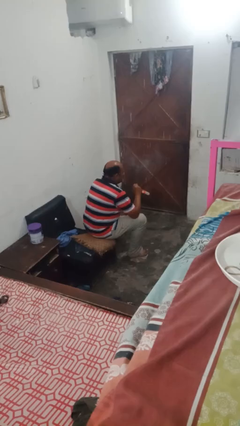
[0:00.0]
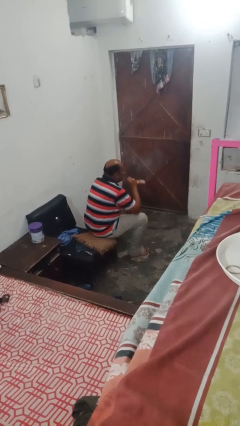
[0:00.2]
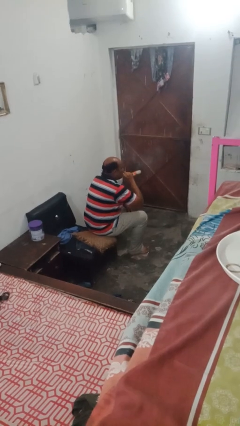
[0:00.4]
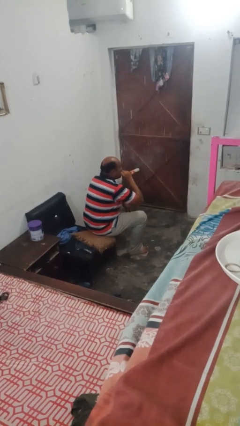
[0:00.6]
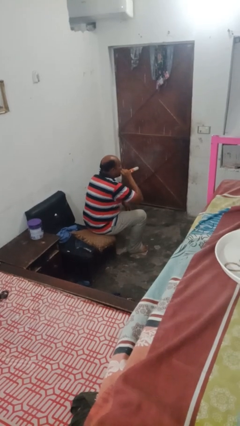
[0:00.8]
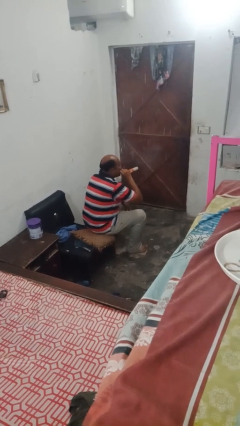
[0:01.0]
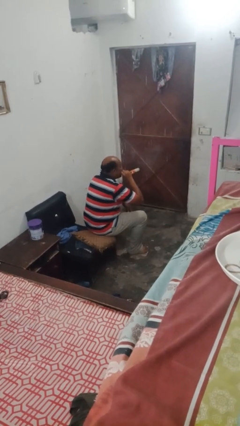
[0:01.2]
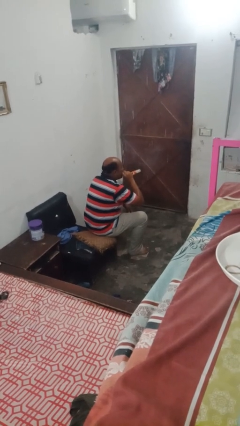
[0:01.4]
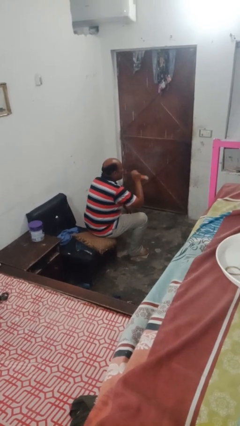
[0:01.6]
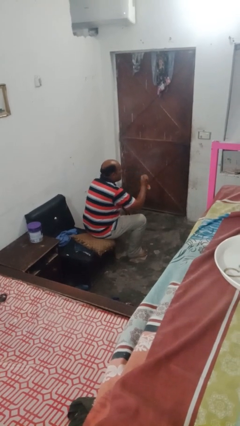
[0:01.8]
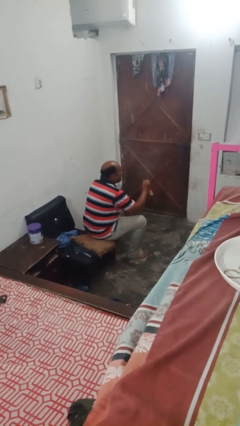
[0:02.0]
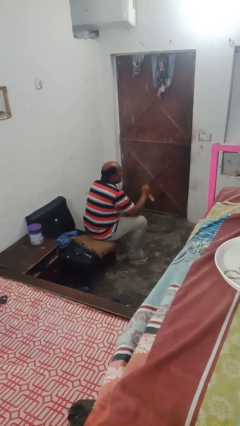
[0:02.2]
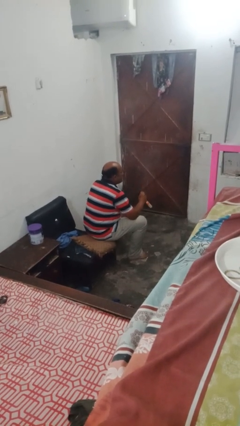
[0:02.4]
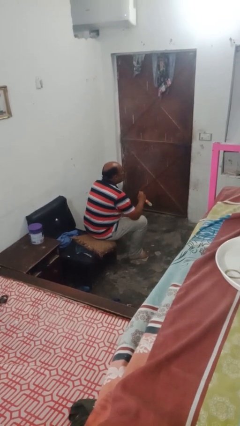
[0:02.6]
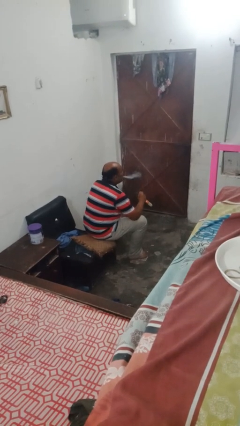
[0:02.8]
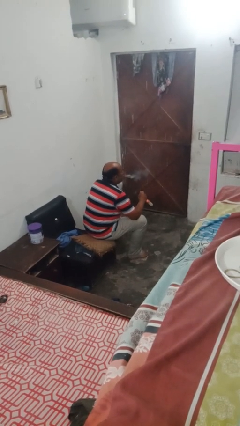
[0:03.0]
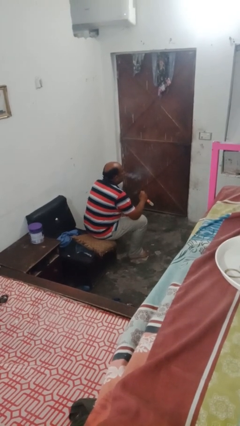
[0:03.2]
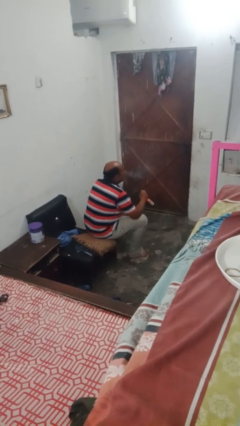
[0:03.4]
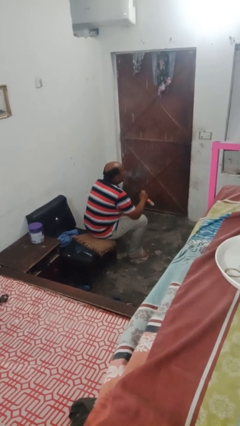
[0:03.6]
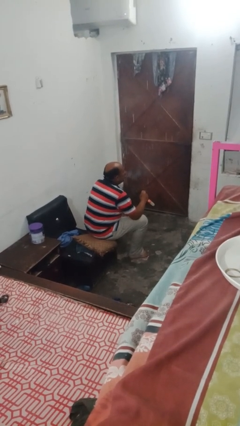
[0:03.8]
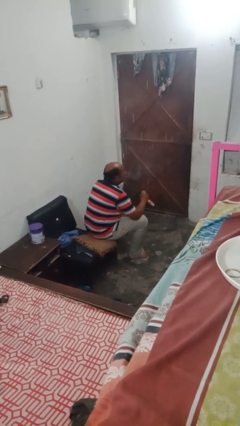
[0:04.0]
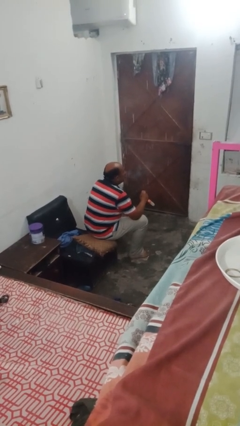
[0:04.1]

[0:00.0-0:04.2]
person vapes

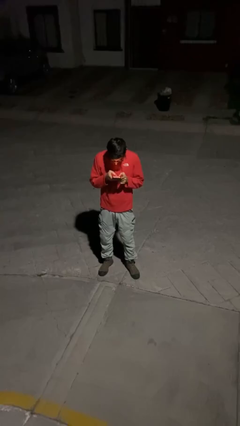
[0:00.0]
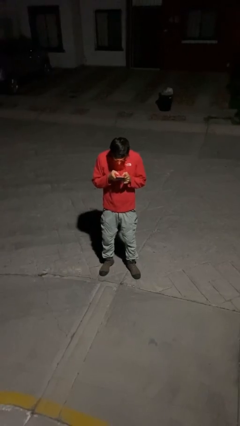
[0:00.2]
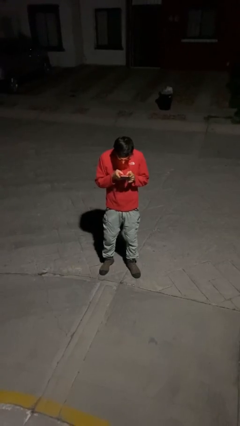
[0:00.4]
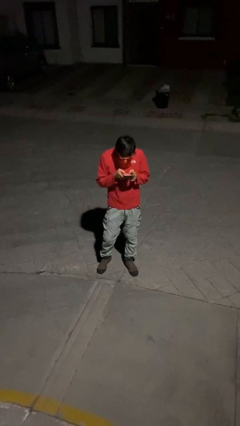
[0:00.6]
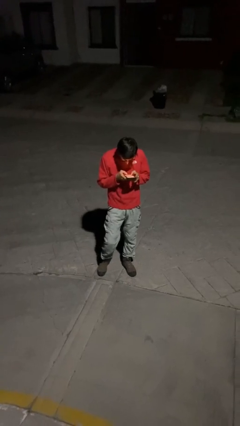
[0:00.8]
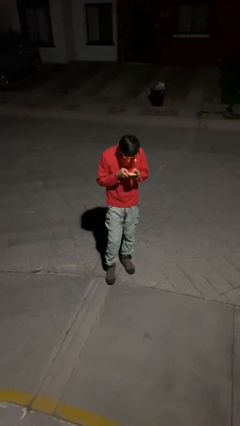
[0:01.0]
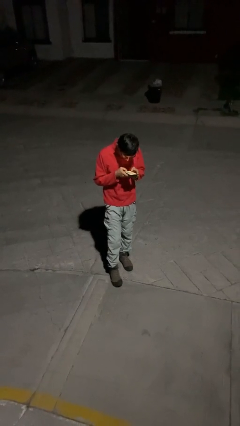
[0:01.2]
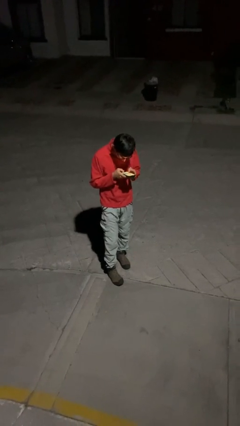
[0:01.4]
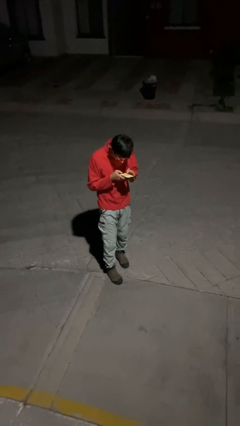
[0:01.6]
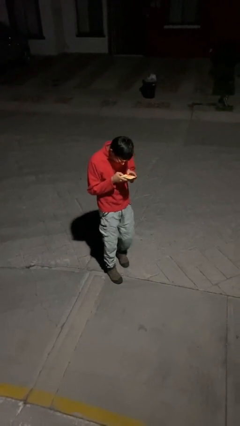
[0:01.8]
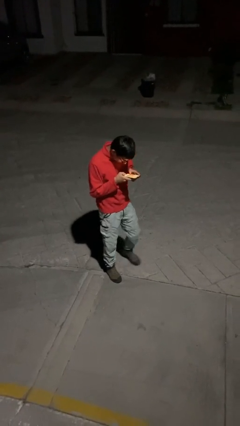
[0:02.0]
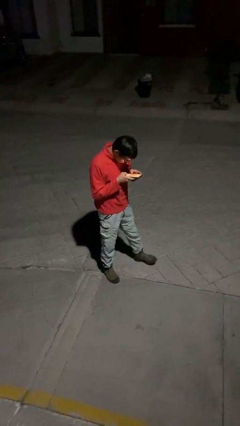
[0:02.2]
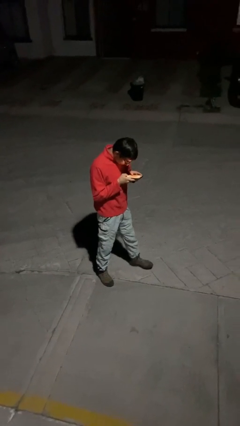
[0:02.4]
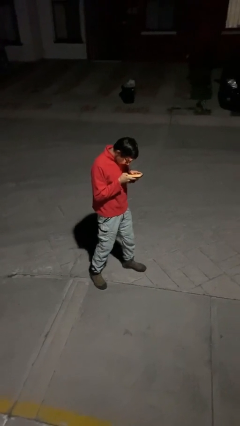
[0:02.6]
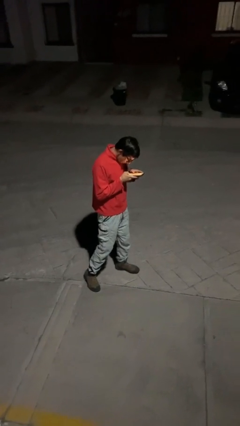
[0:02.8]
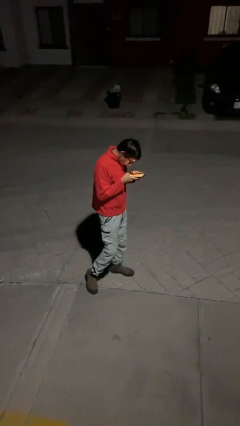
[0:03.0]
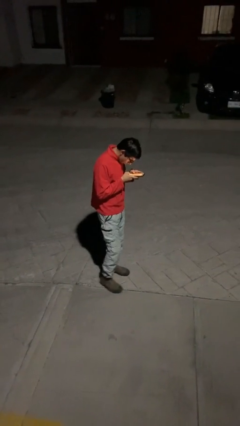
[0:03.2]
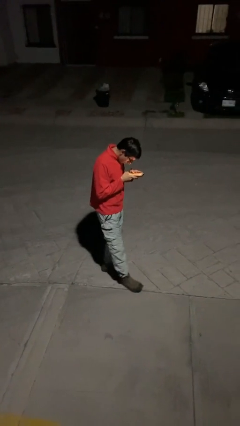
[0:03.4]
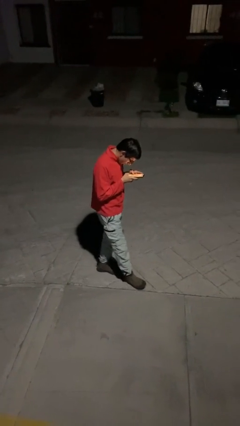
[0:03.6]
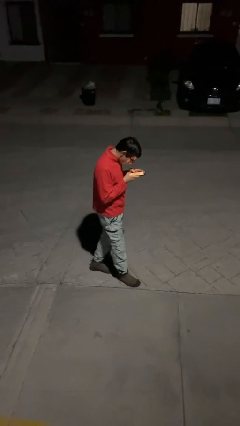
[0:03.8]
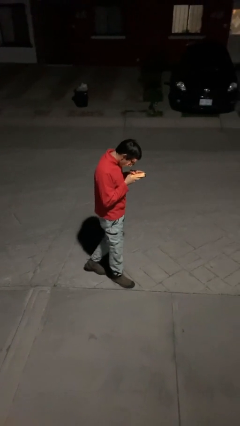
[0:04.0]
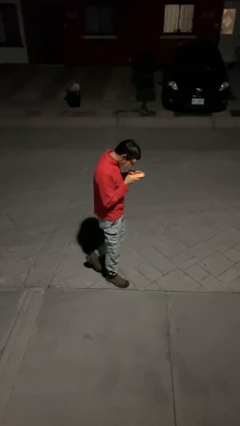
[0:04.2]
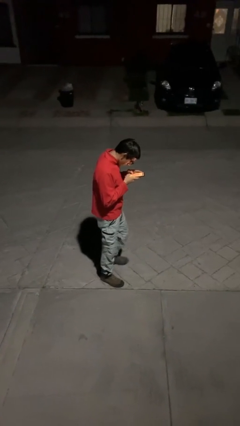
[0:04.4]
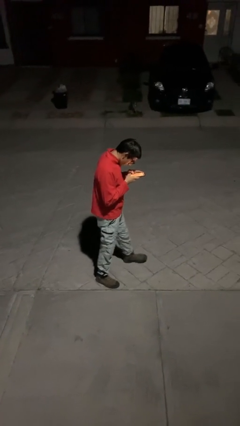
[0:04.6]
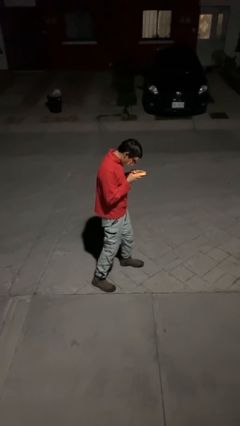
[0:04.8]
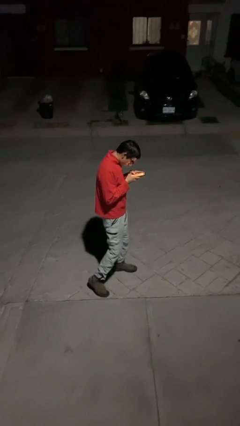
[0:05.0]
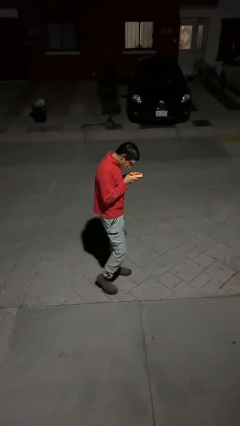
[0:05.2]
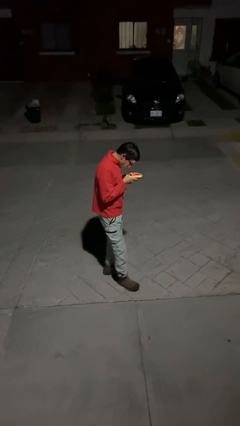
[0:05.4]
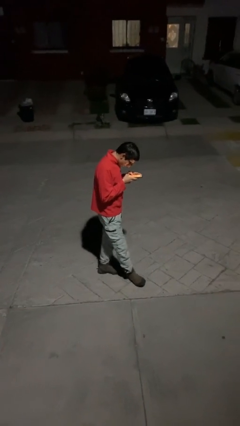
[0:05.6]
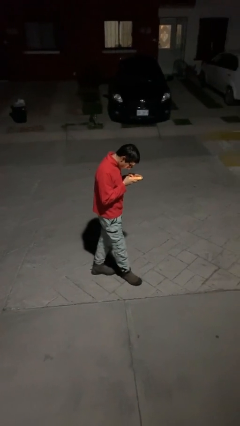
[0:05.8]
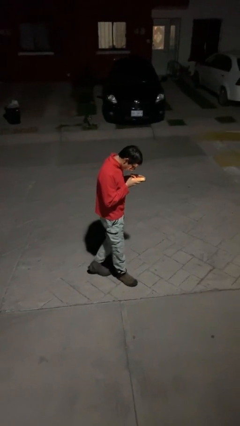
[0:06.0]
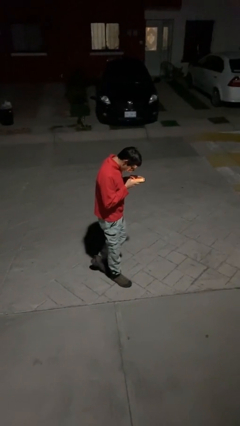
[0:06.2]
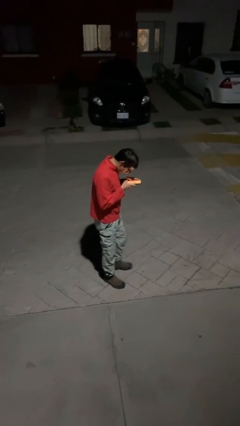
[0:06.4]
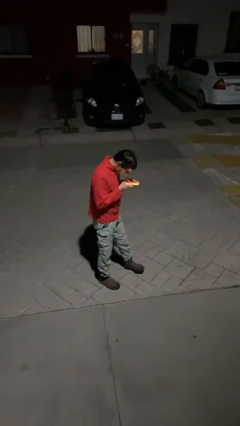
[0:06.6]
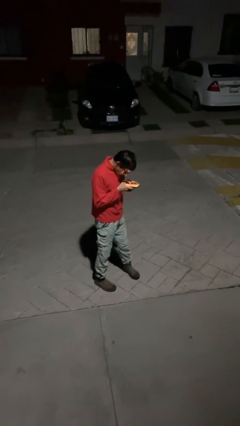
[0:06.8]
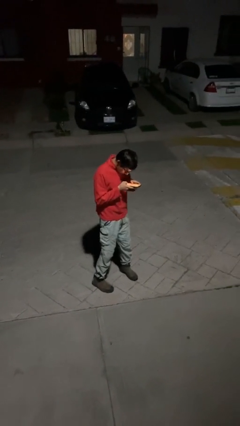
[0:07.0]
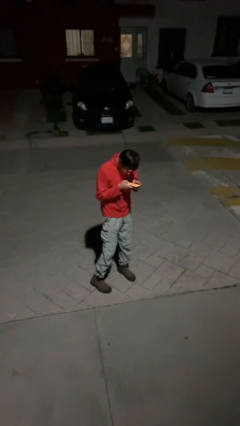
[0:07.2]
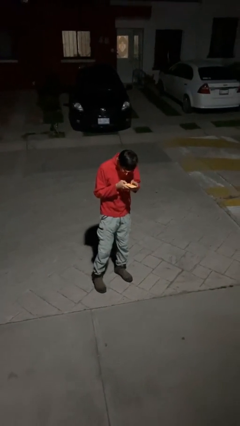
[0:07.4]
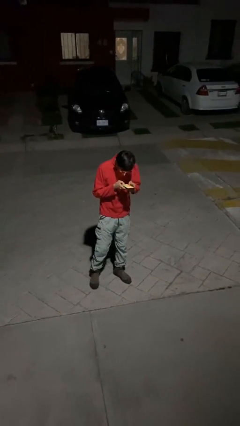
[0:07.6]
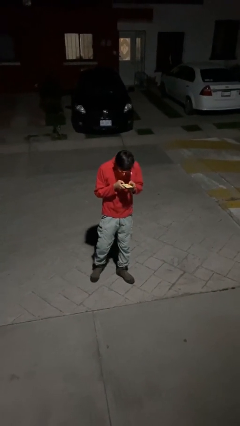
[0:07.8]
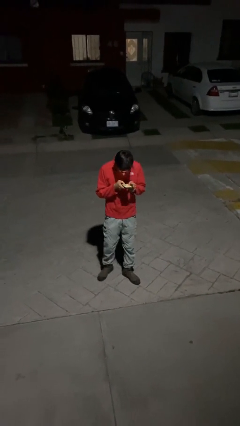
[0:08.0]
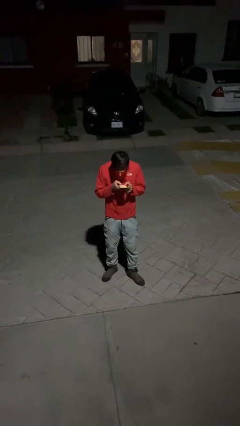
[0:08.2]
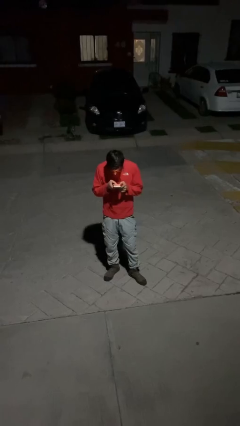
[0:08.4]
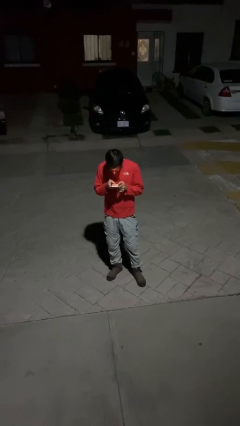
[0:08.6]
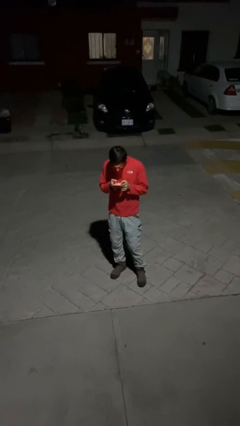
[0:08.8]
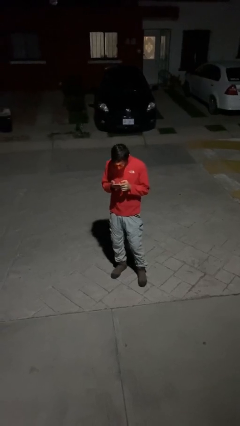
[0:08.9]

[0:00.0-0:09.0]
person texts on phone

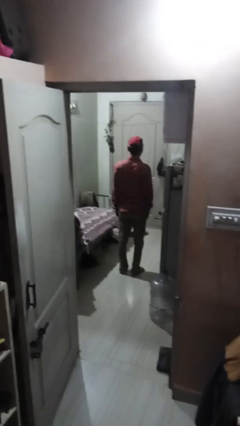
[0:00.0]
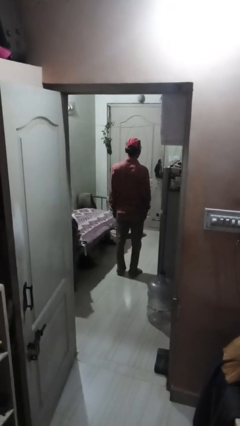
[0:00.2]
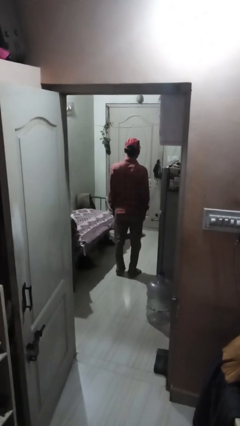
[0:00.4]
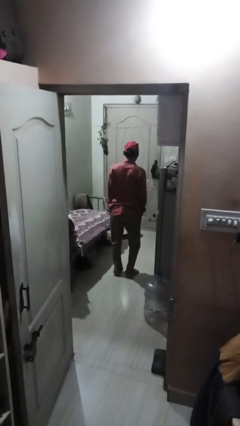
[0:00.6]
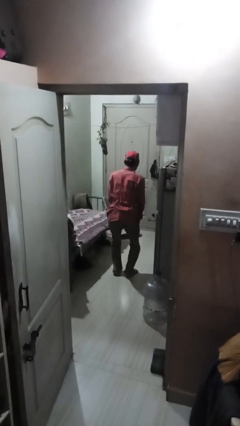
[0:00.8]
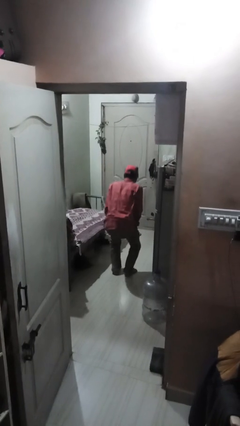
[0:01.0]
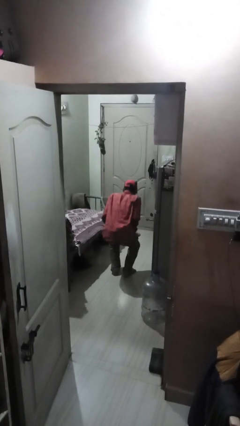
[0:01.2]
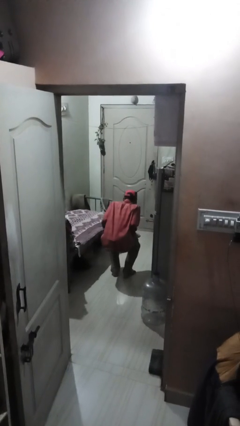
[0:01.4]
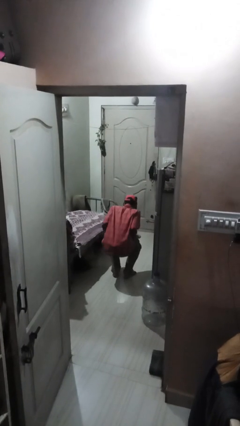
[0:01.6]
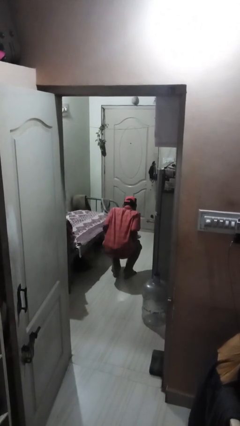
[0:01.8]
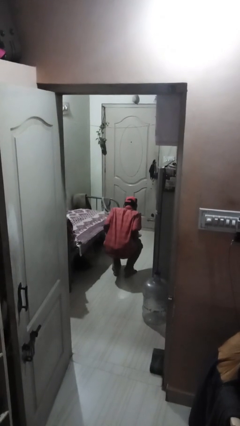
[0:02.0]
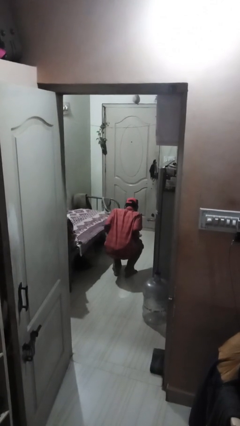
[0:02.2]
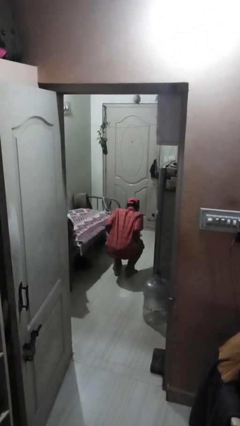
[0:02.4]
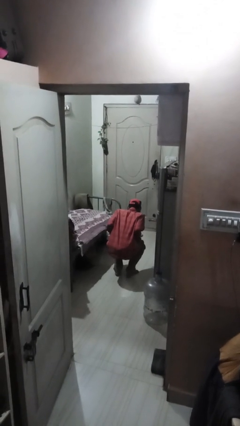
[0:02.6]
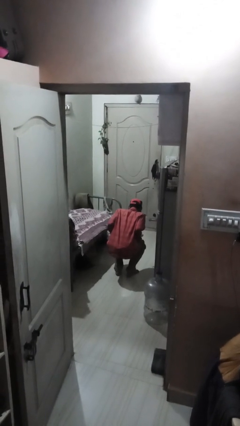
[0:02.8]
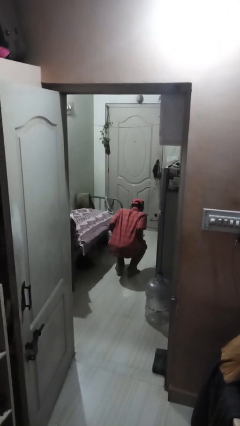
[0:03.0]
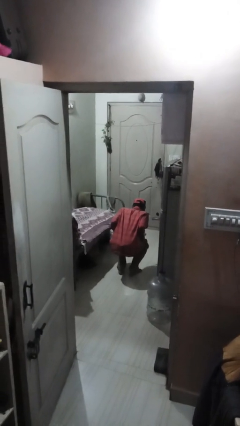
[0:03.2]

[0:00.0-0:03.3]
person squats

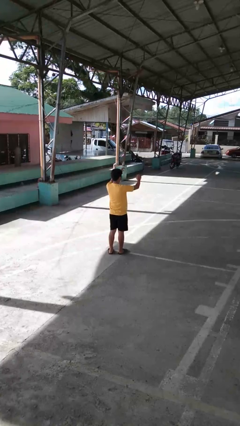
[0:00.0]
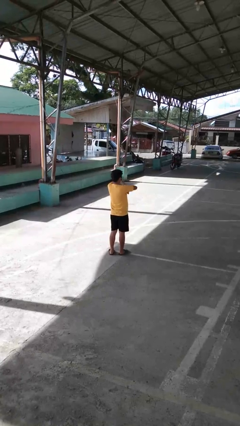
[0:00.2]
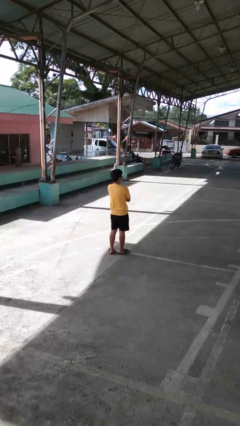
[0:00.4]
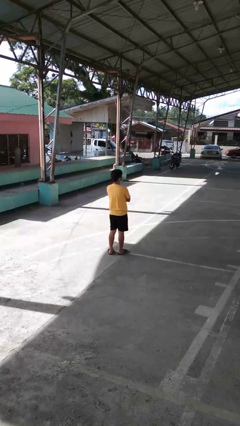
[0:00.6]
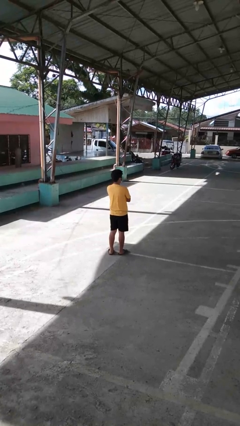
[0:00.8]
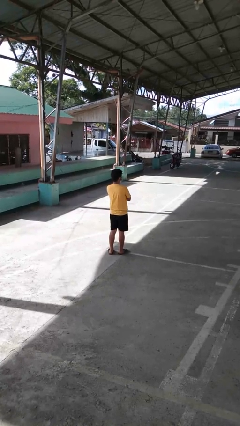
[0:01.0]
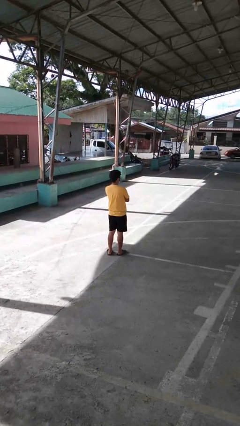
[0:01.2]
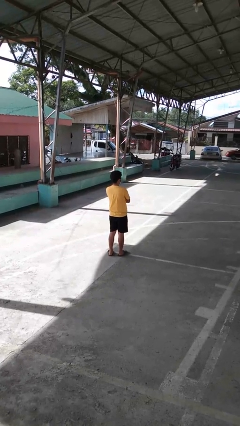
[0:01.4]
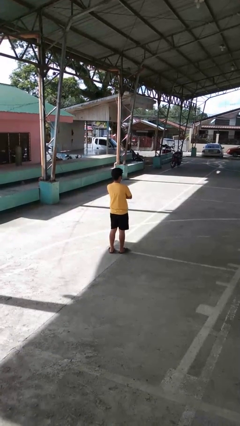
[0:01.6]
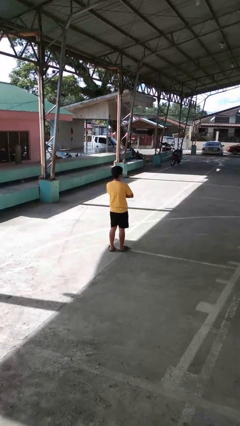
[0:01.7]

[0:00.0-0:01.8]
person crosses arms
